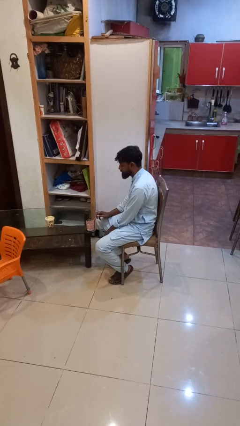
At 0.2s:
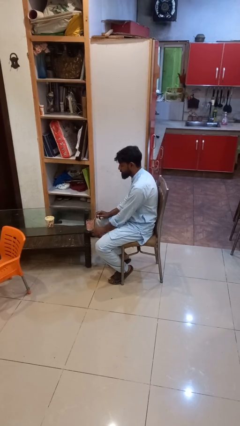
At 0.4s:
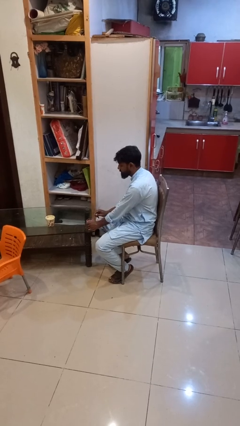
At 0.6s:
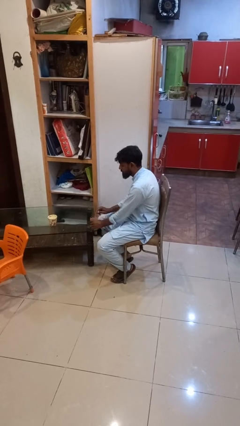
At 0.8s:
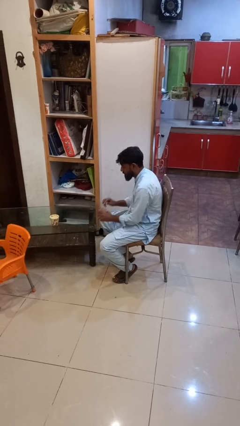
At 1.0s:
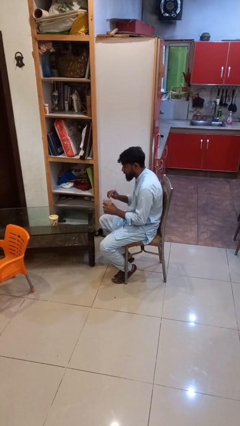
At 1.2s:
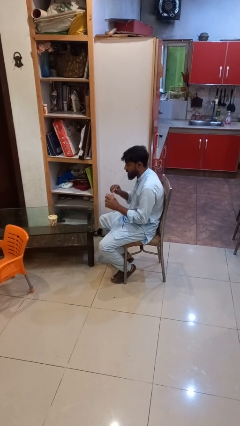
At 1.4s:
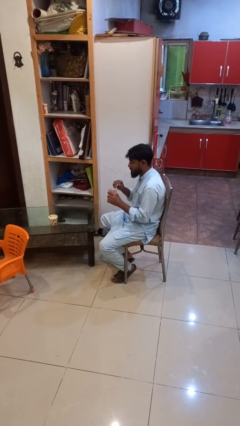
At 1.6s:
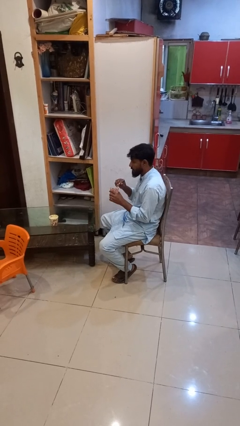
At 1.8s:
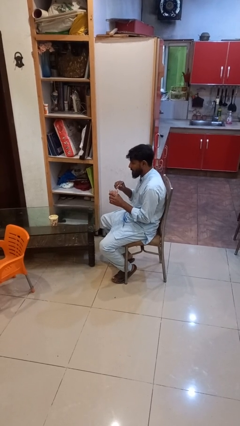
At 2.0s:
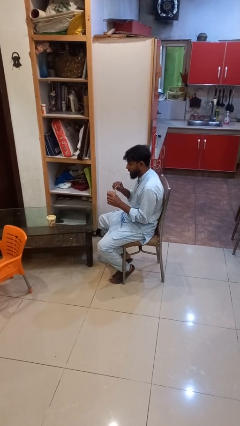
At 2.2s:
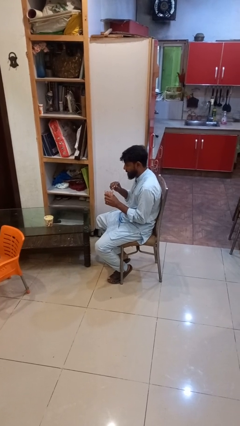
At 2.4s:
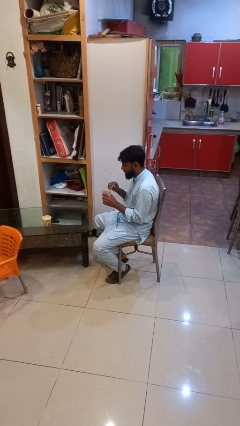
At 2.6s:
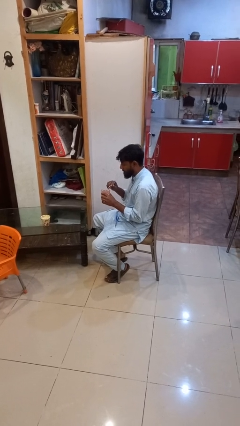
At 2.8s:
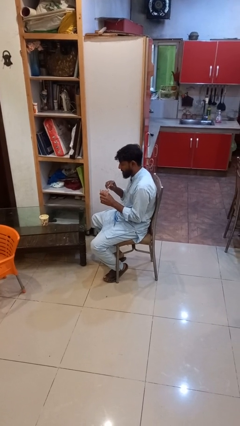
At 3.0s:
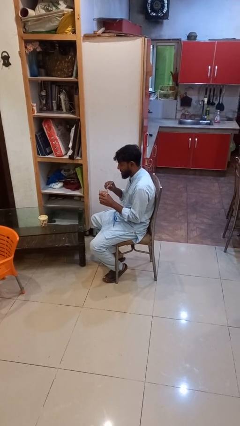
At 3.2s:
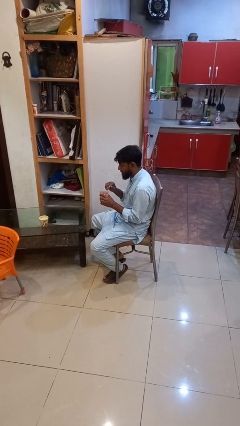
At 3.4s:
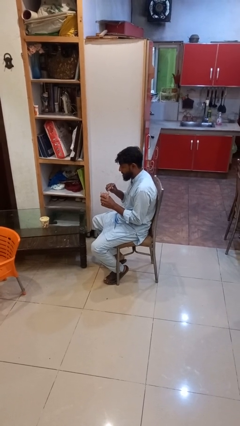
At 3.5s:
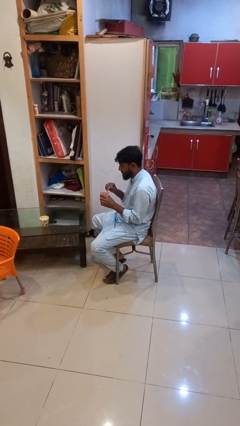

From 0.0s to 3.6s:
person drinks from straw

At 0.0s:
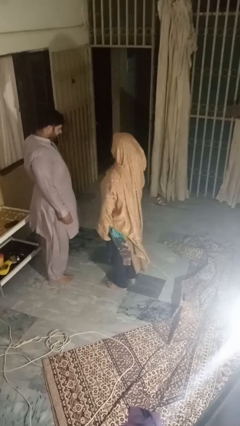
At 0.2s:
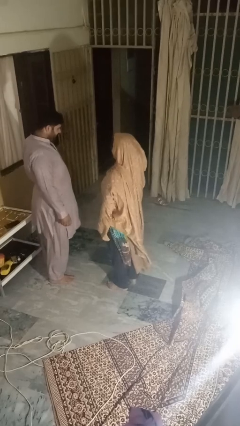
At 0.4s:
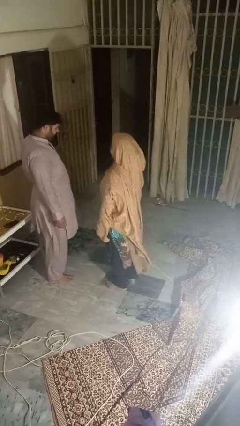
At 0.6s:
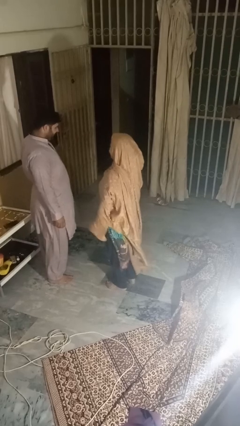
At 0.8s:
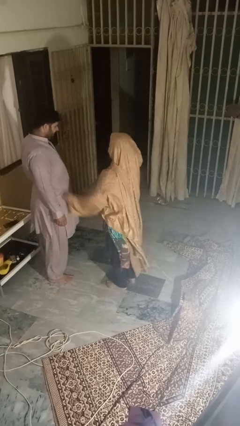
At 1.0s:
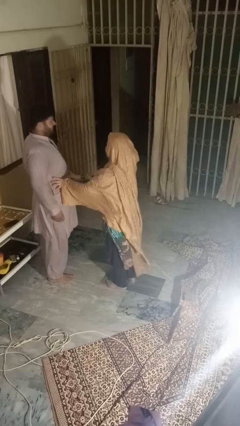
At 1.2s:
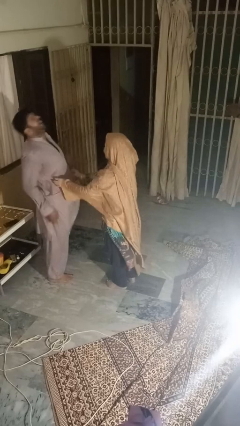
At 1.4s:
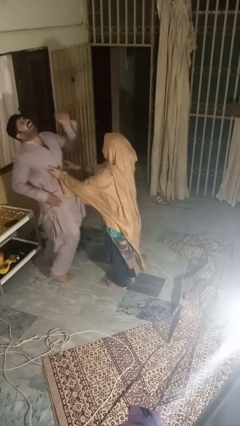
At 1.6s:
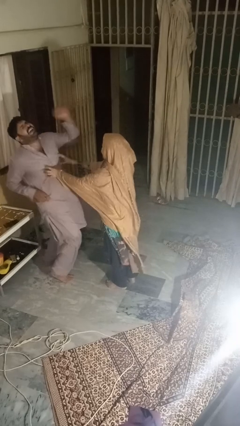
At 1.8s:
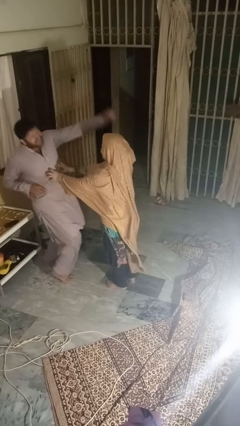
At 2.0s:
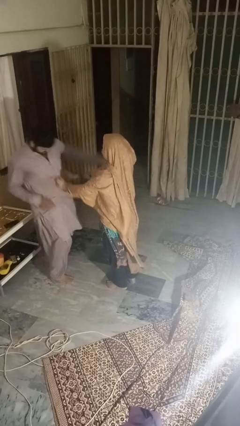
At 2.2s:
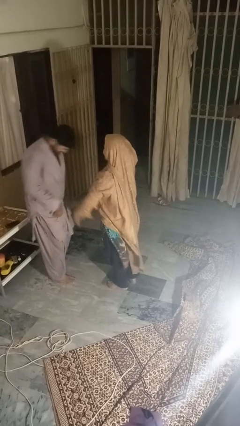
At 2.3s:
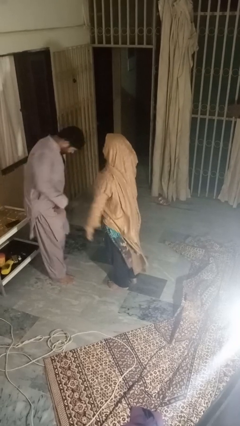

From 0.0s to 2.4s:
person tickles person

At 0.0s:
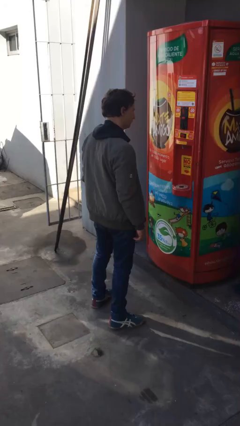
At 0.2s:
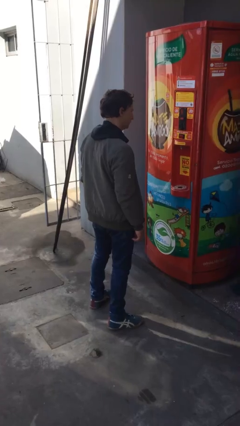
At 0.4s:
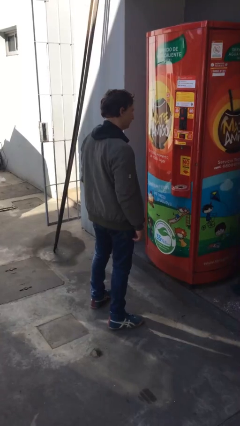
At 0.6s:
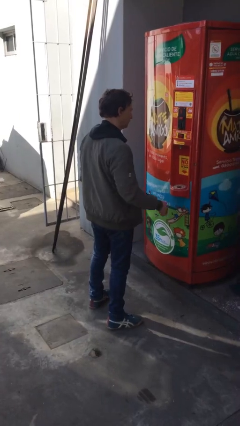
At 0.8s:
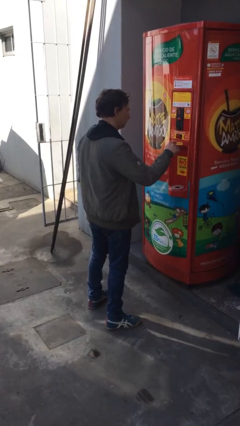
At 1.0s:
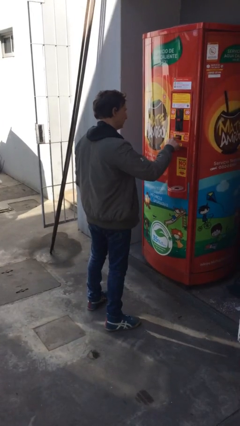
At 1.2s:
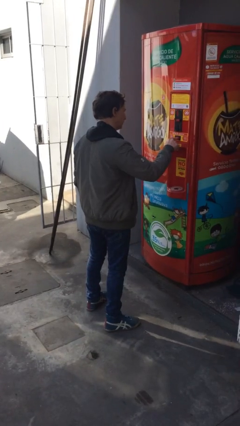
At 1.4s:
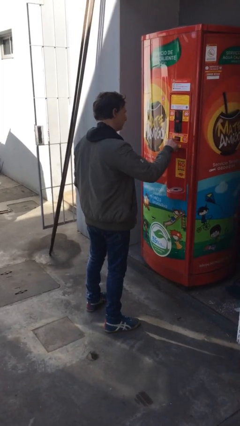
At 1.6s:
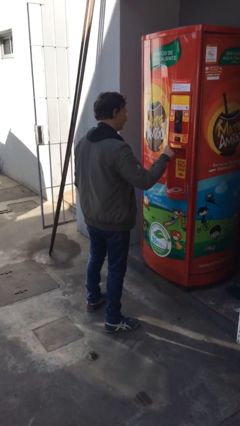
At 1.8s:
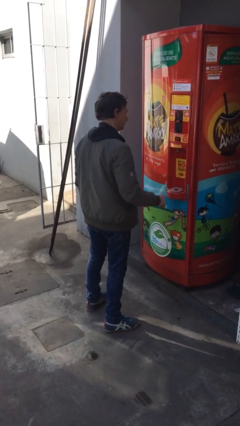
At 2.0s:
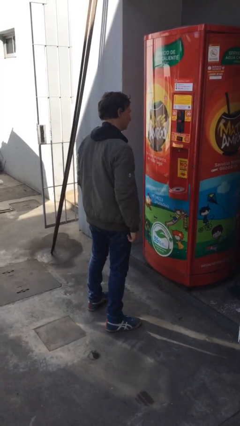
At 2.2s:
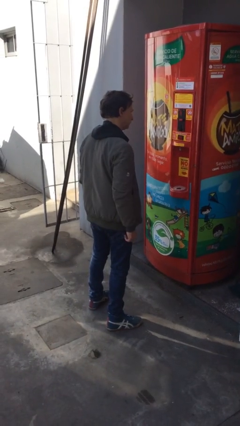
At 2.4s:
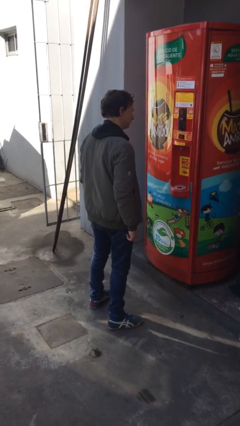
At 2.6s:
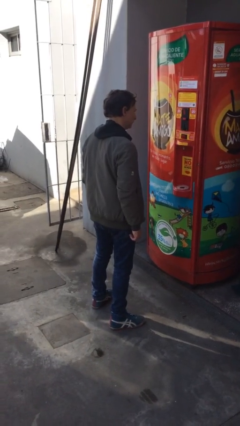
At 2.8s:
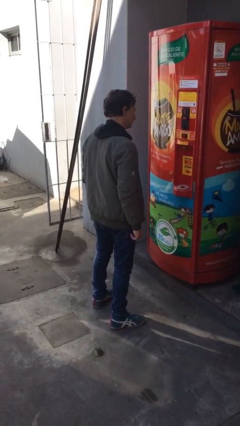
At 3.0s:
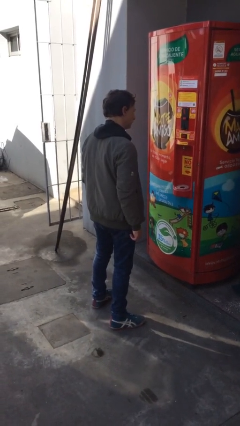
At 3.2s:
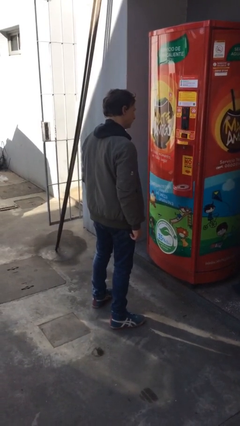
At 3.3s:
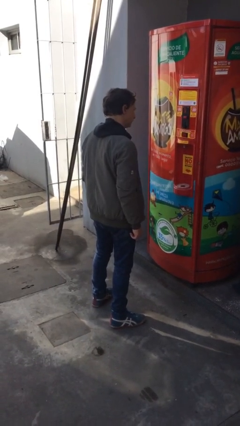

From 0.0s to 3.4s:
person purchases from machine

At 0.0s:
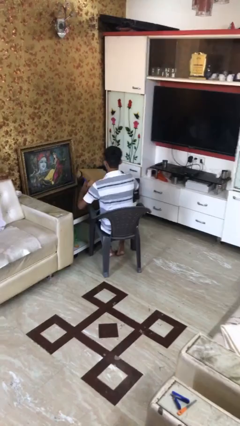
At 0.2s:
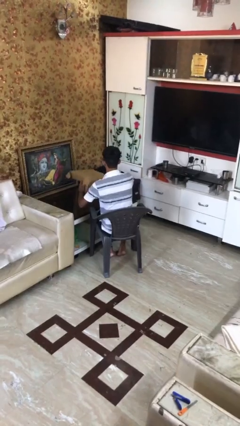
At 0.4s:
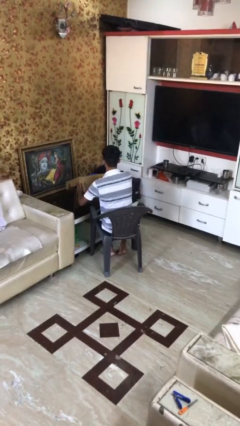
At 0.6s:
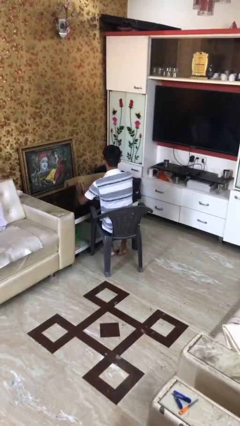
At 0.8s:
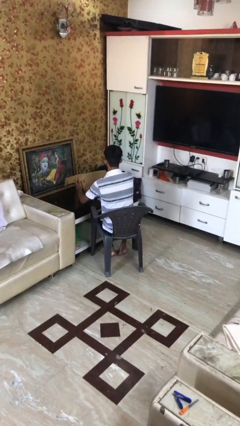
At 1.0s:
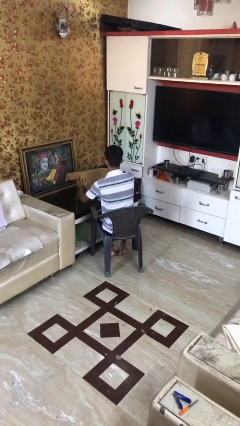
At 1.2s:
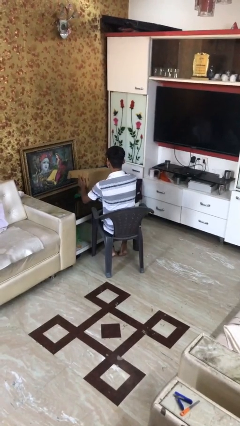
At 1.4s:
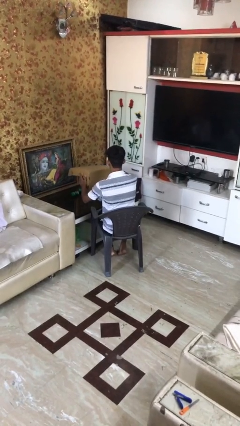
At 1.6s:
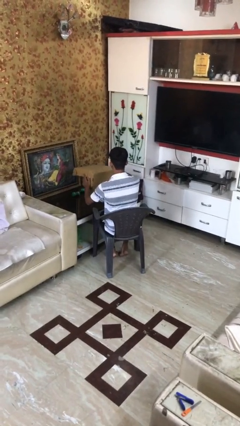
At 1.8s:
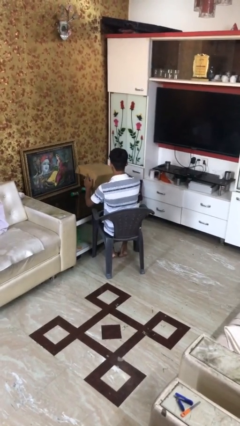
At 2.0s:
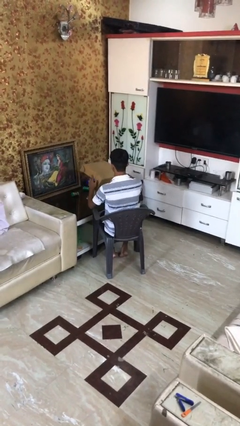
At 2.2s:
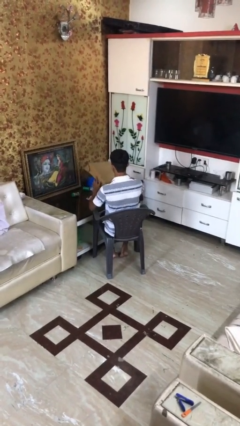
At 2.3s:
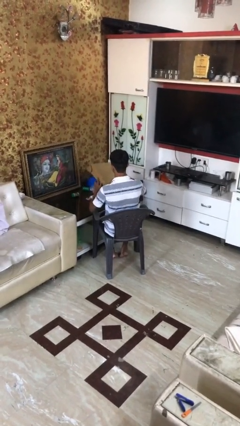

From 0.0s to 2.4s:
person unloads box onto table

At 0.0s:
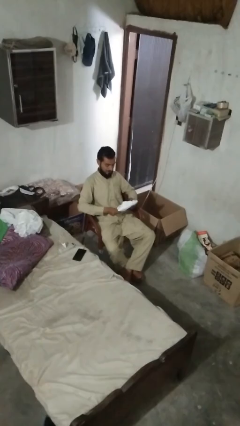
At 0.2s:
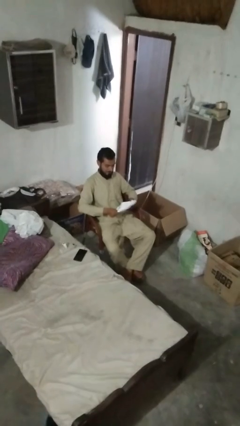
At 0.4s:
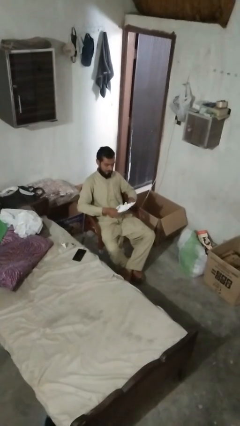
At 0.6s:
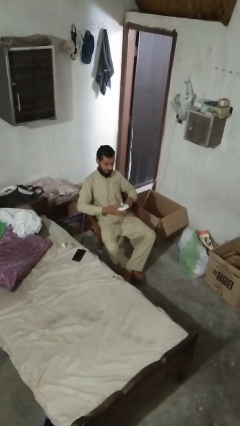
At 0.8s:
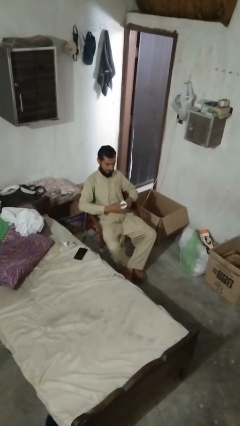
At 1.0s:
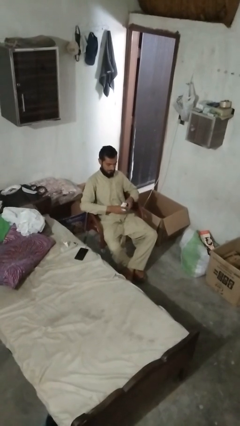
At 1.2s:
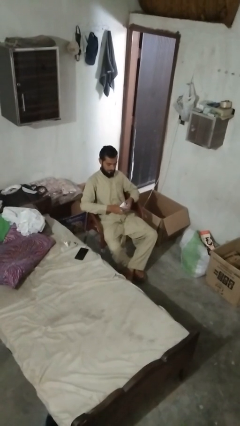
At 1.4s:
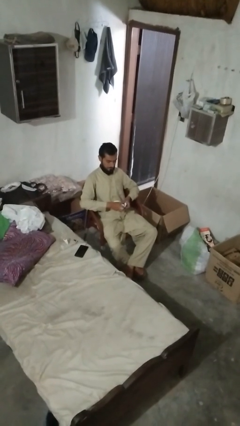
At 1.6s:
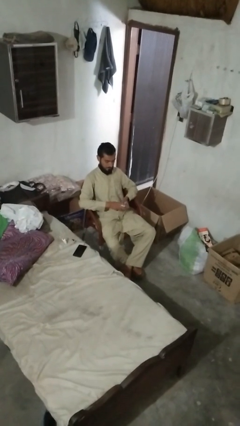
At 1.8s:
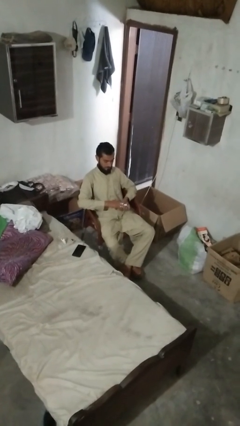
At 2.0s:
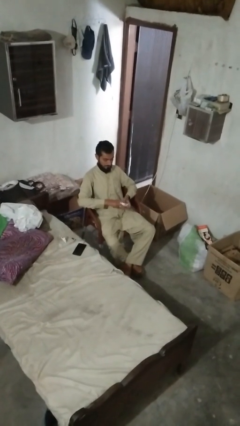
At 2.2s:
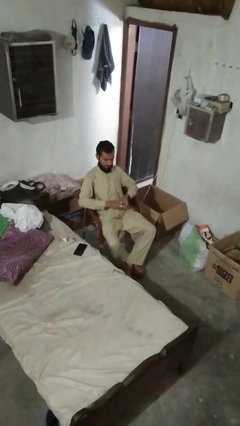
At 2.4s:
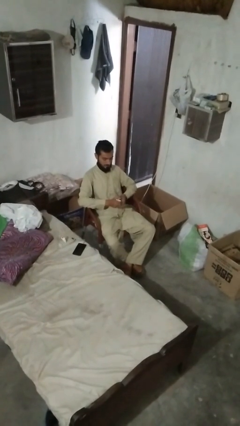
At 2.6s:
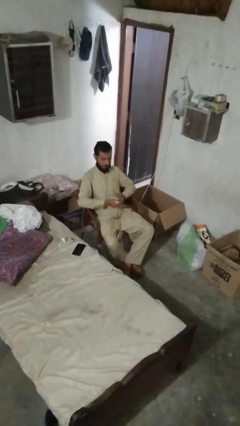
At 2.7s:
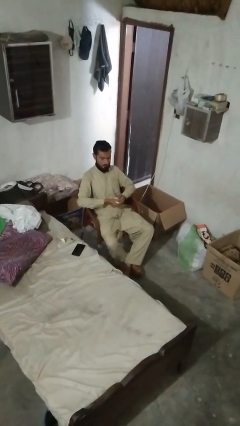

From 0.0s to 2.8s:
person crumples paper

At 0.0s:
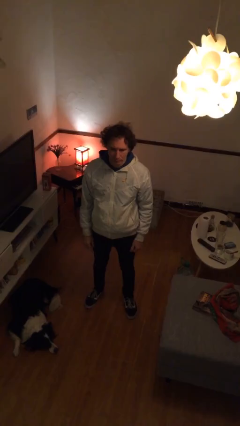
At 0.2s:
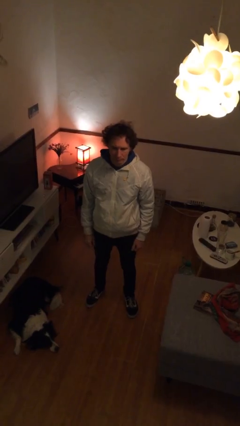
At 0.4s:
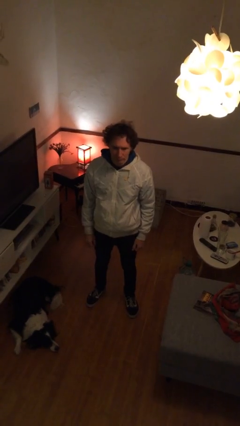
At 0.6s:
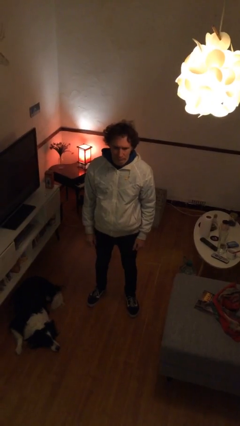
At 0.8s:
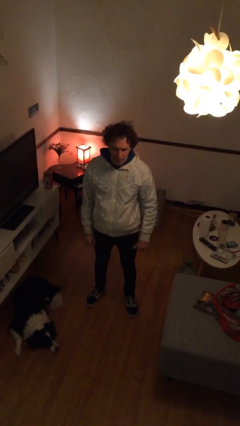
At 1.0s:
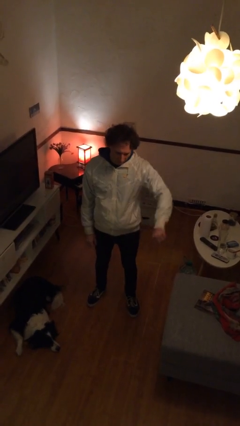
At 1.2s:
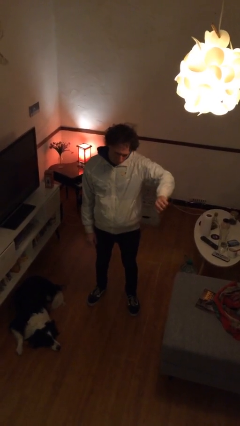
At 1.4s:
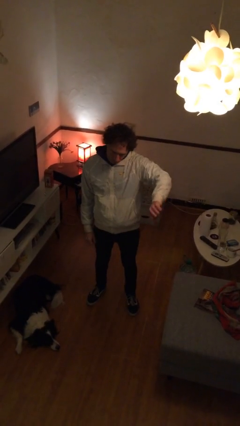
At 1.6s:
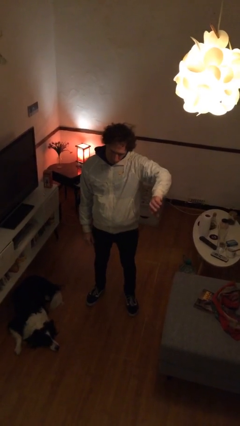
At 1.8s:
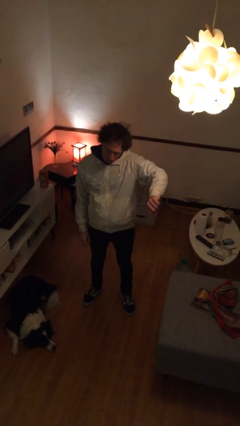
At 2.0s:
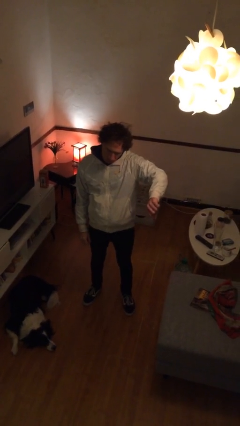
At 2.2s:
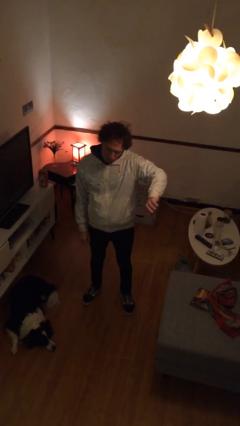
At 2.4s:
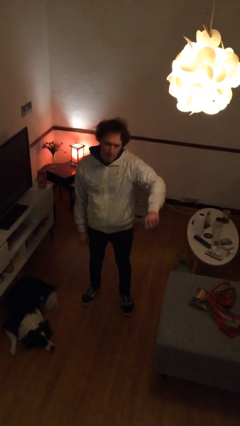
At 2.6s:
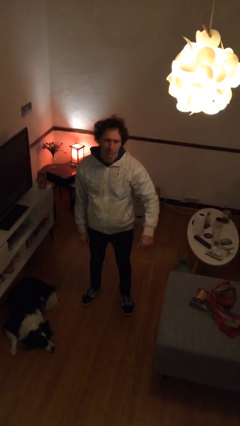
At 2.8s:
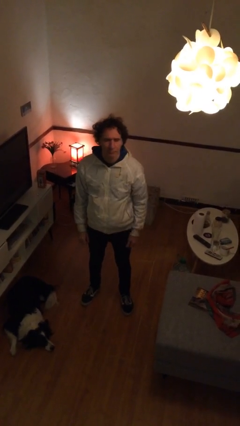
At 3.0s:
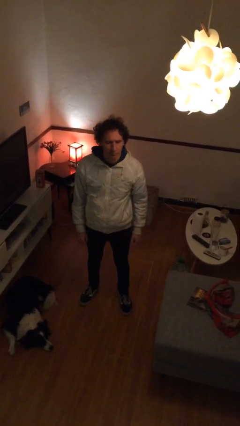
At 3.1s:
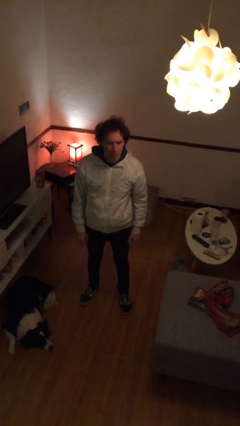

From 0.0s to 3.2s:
person gestures thumbs down
